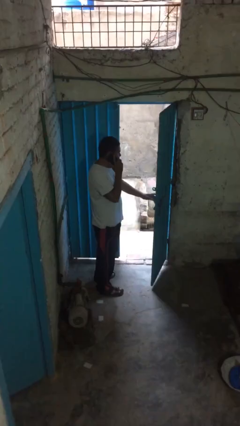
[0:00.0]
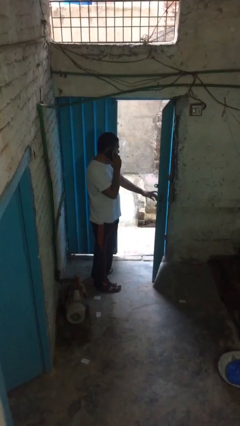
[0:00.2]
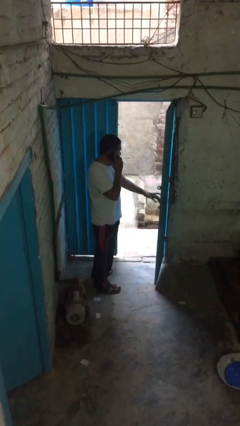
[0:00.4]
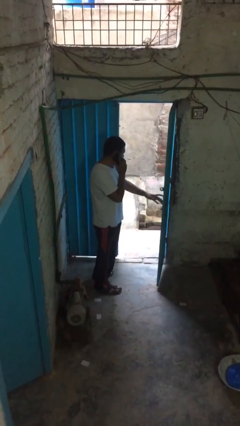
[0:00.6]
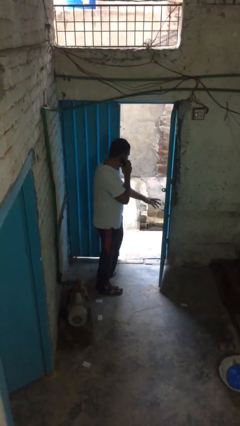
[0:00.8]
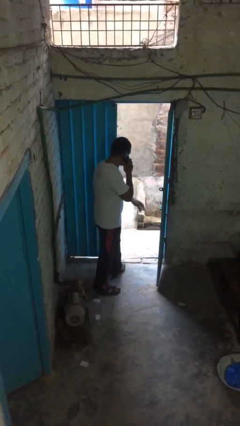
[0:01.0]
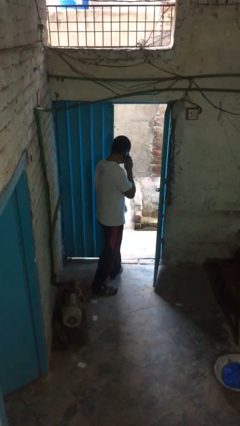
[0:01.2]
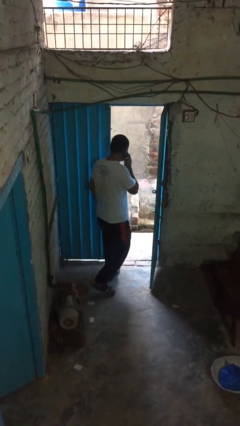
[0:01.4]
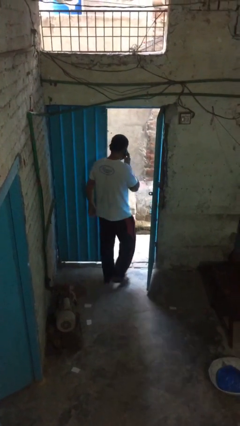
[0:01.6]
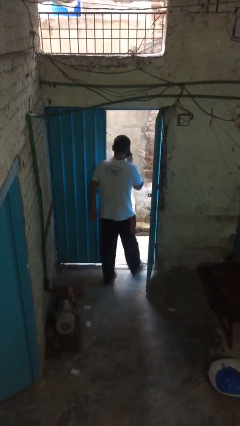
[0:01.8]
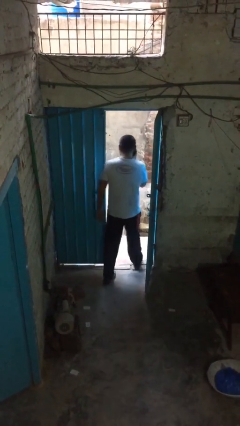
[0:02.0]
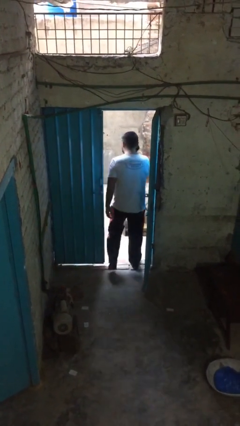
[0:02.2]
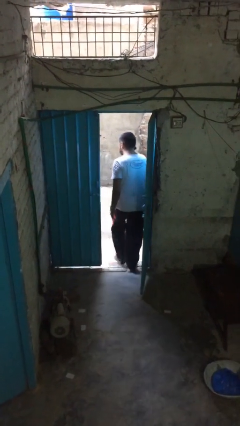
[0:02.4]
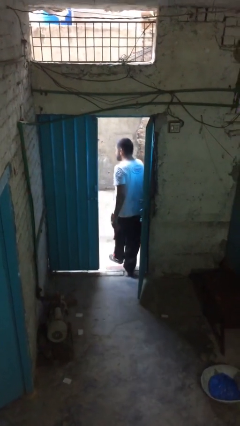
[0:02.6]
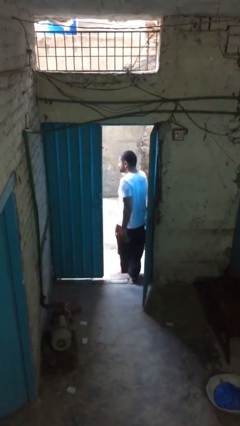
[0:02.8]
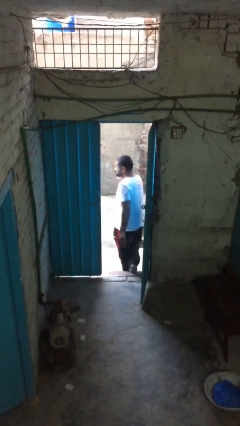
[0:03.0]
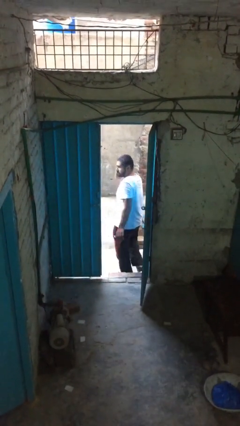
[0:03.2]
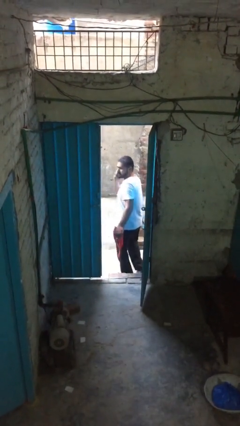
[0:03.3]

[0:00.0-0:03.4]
person exits scene through structure

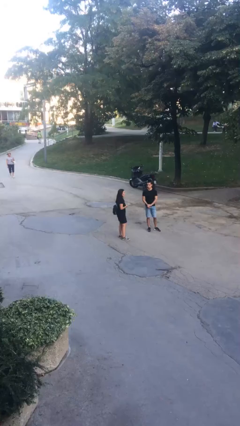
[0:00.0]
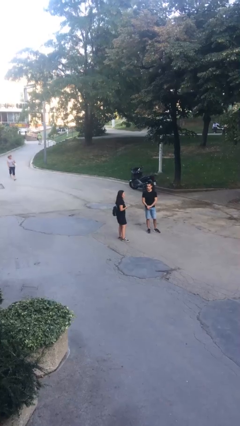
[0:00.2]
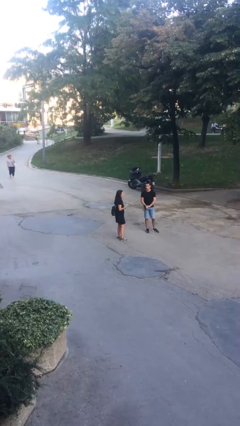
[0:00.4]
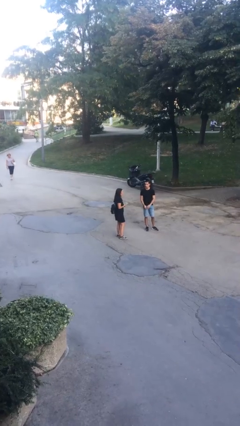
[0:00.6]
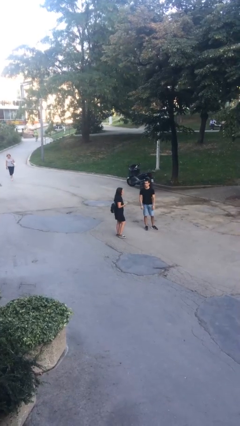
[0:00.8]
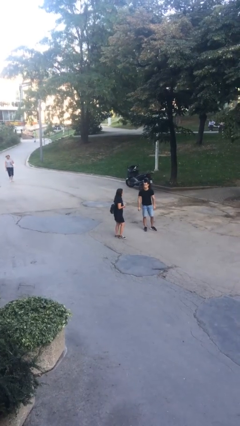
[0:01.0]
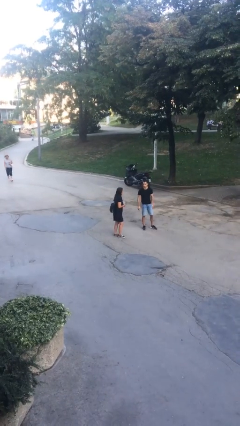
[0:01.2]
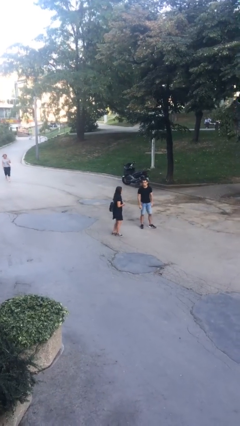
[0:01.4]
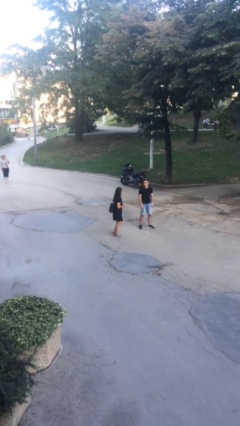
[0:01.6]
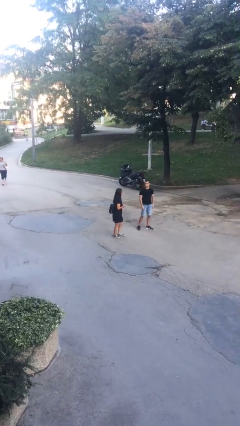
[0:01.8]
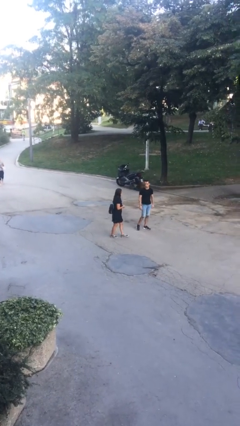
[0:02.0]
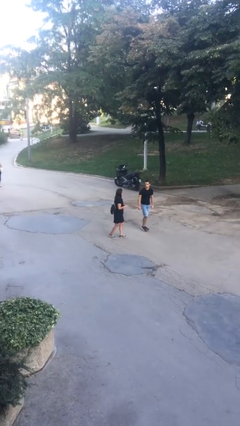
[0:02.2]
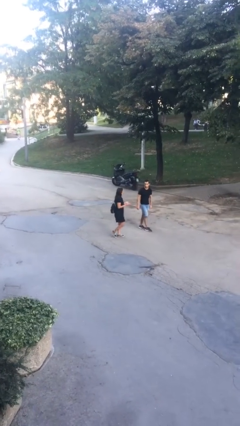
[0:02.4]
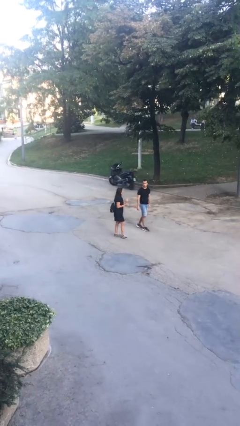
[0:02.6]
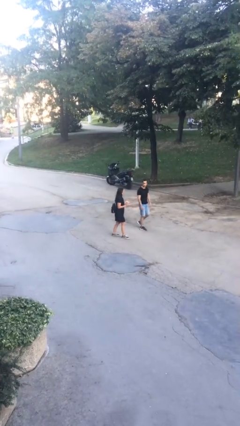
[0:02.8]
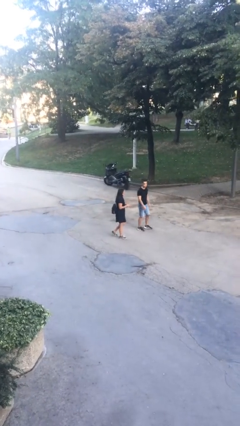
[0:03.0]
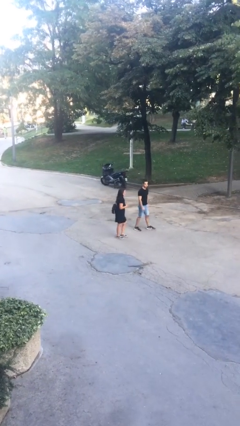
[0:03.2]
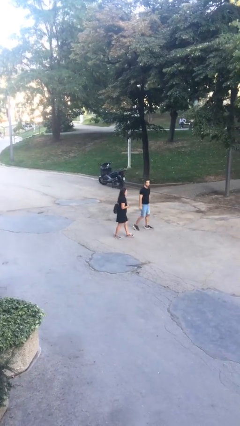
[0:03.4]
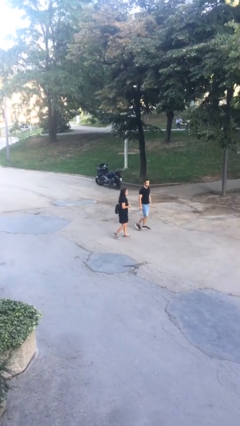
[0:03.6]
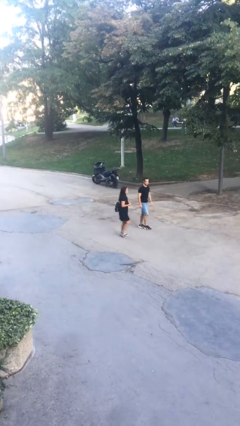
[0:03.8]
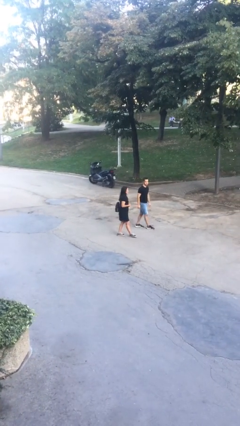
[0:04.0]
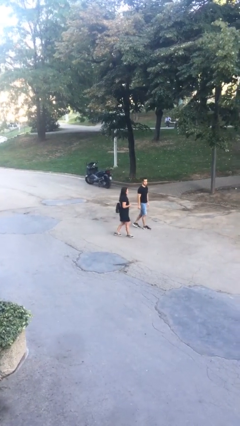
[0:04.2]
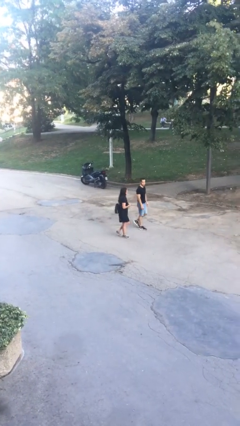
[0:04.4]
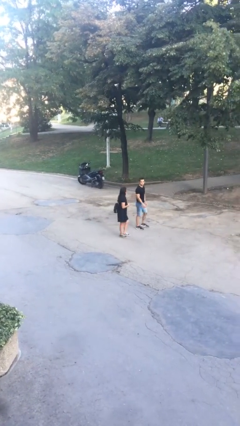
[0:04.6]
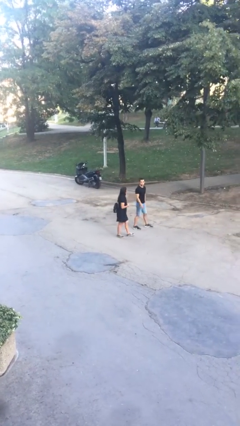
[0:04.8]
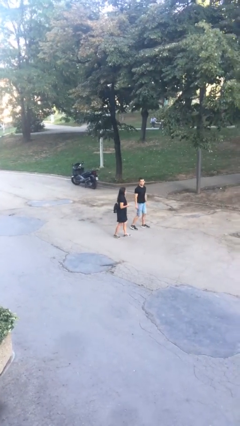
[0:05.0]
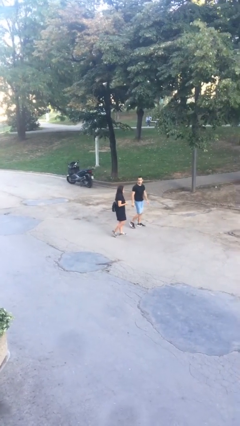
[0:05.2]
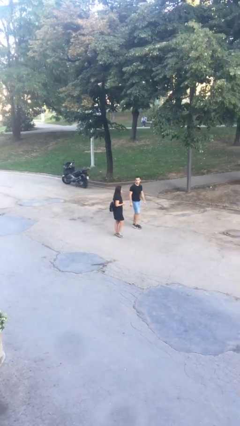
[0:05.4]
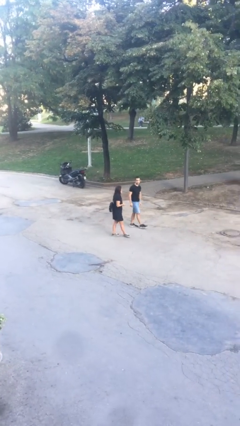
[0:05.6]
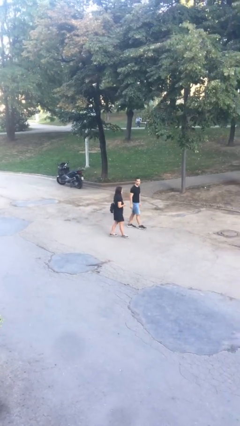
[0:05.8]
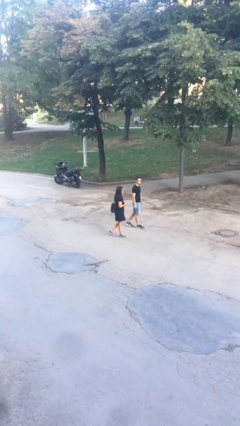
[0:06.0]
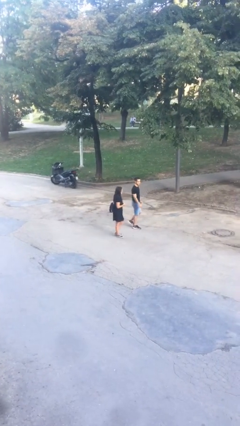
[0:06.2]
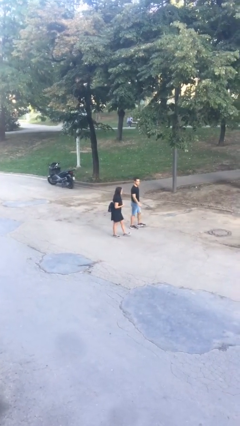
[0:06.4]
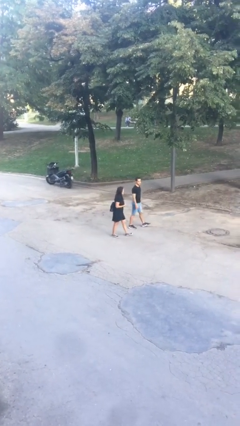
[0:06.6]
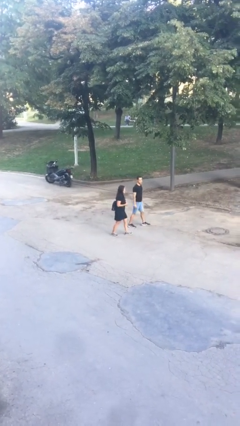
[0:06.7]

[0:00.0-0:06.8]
person talks to person

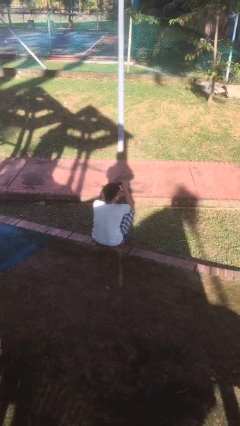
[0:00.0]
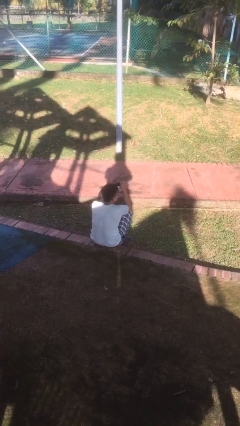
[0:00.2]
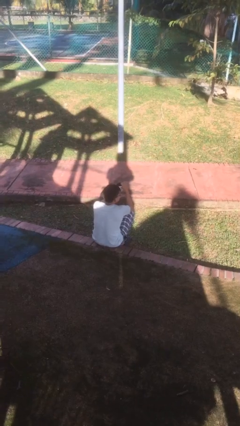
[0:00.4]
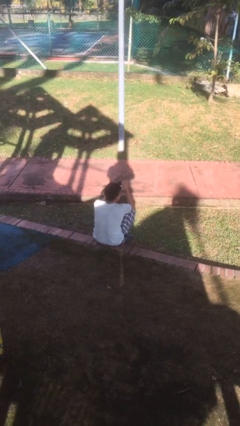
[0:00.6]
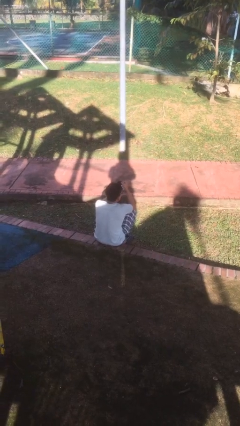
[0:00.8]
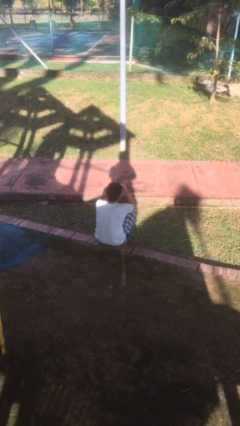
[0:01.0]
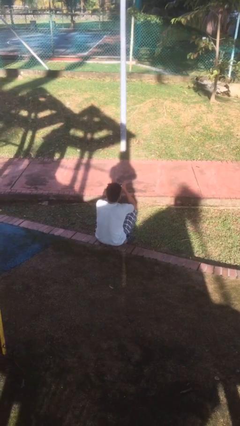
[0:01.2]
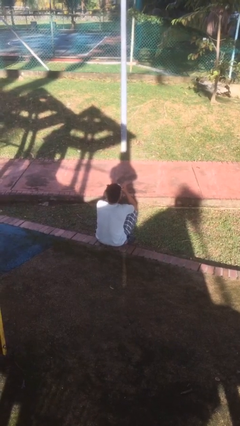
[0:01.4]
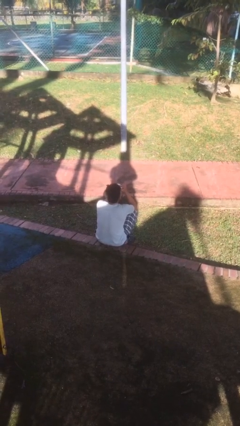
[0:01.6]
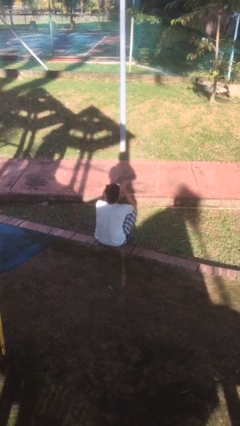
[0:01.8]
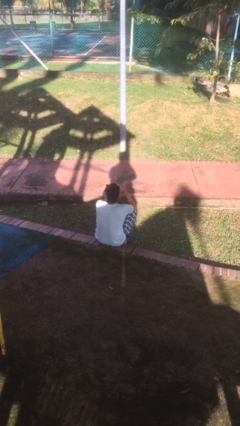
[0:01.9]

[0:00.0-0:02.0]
person drinks from mug

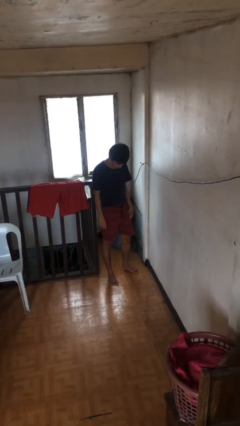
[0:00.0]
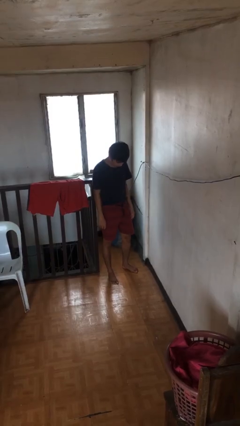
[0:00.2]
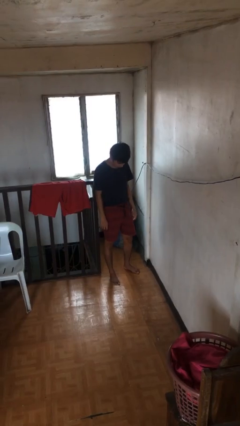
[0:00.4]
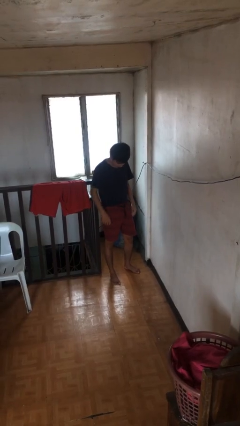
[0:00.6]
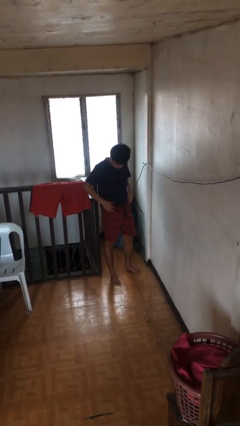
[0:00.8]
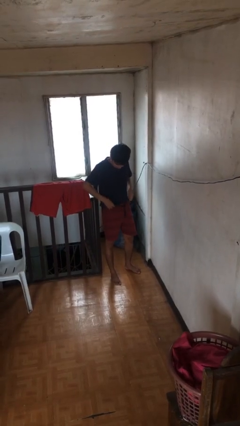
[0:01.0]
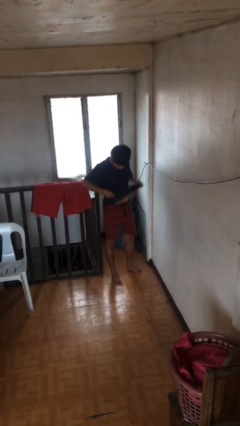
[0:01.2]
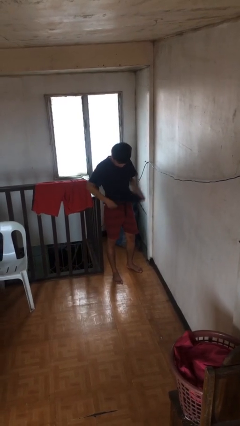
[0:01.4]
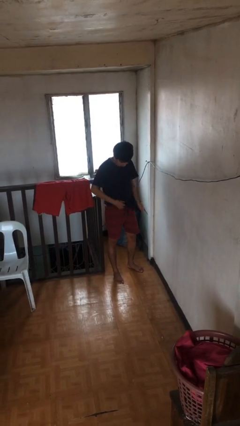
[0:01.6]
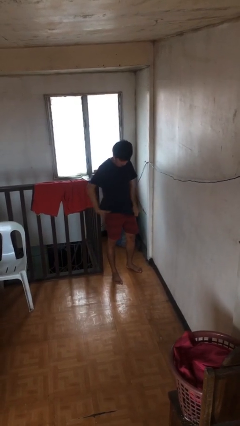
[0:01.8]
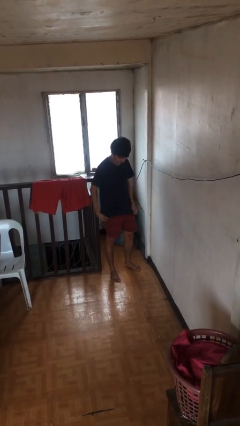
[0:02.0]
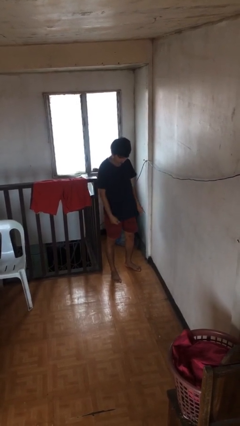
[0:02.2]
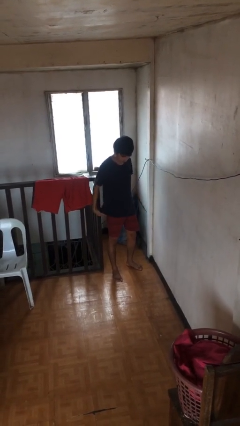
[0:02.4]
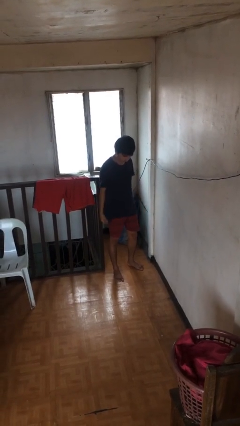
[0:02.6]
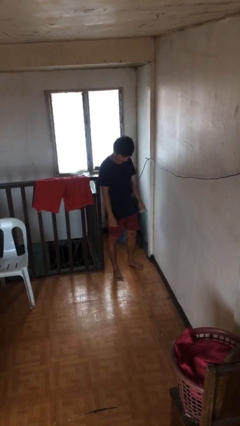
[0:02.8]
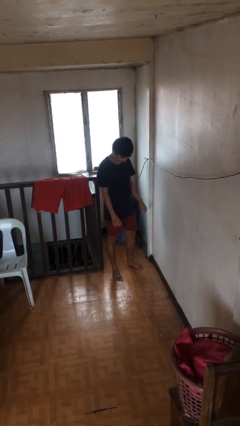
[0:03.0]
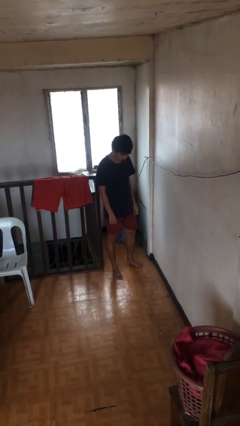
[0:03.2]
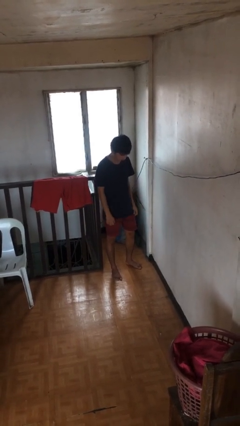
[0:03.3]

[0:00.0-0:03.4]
person untucks shirt

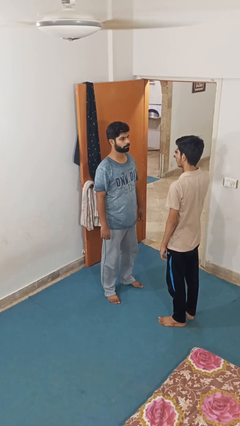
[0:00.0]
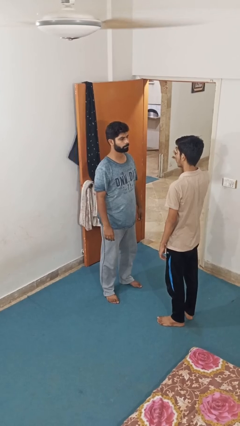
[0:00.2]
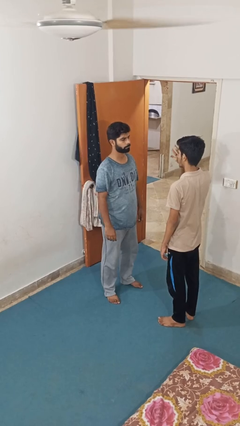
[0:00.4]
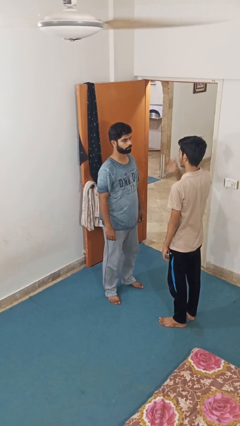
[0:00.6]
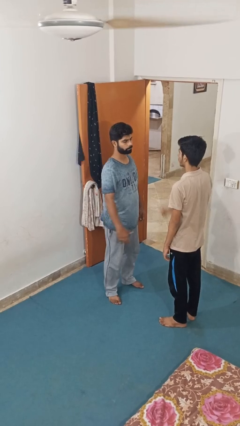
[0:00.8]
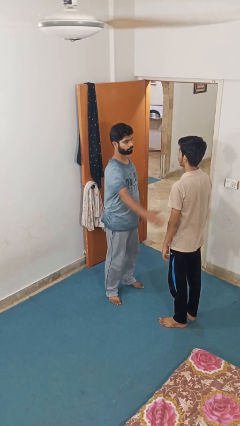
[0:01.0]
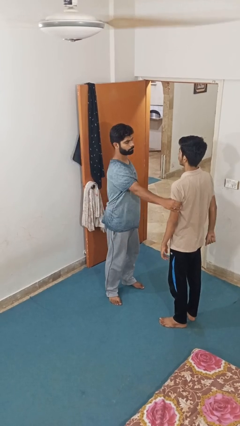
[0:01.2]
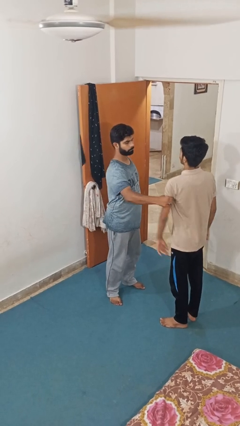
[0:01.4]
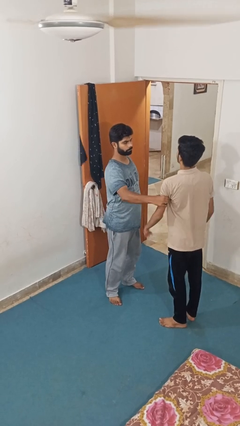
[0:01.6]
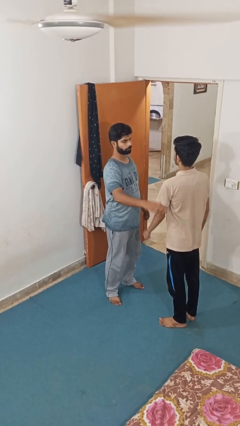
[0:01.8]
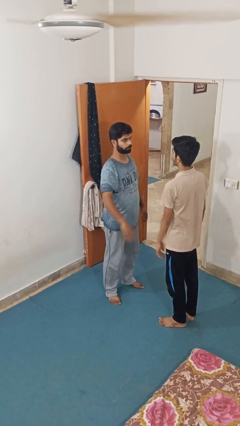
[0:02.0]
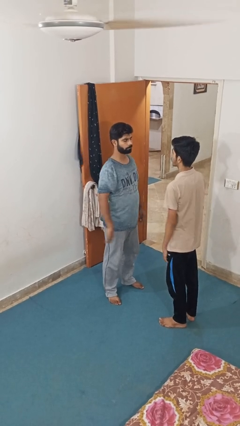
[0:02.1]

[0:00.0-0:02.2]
person grabs person by bicep
